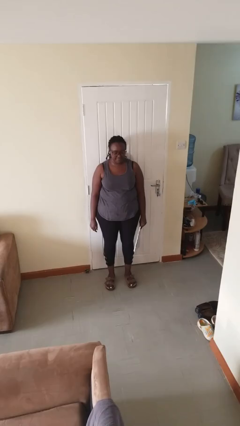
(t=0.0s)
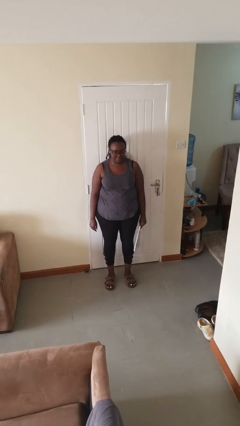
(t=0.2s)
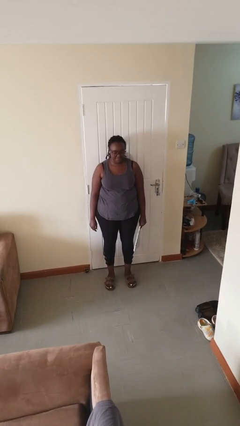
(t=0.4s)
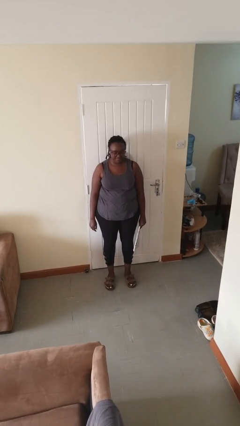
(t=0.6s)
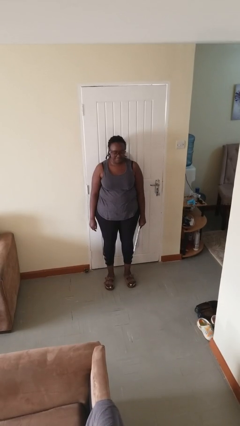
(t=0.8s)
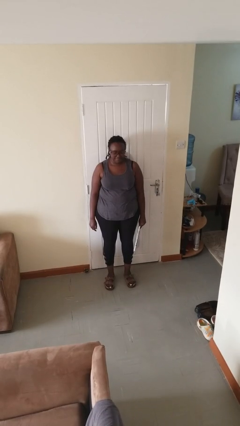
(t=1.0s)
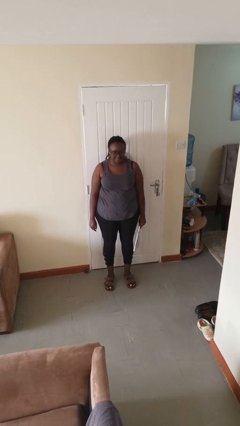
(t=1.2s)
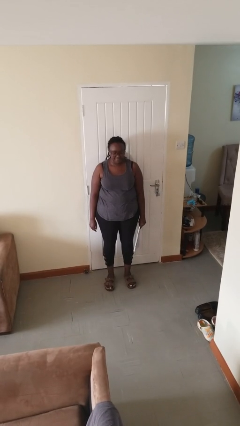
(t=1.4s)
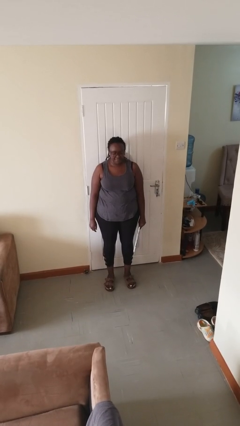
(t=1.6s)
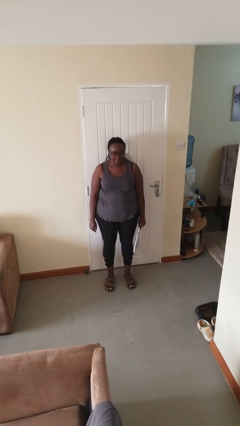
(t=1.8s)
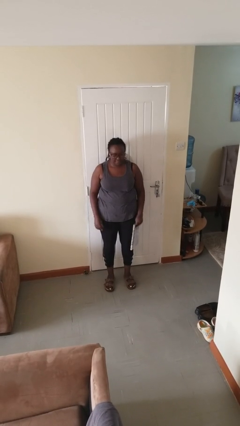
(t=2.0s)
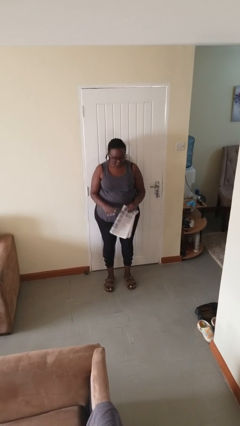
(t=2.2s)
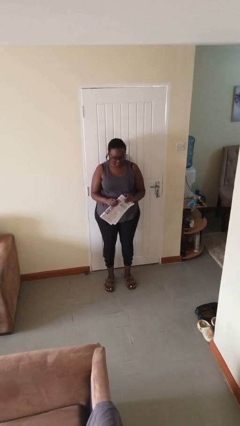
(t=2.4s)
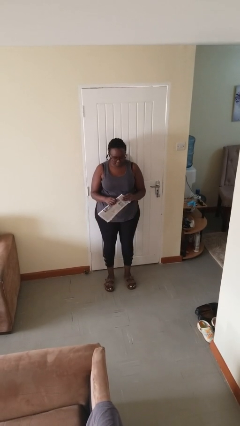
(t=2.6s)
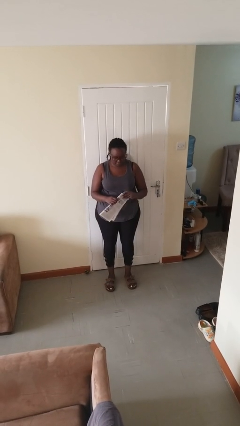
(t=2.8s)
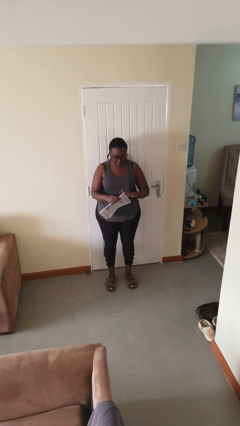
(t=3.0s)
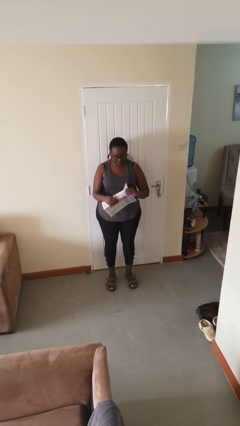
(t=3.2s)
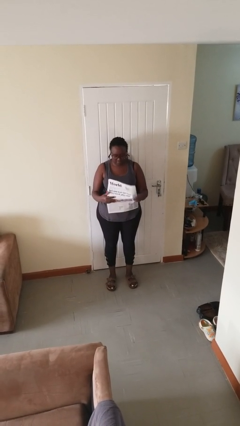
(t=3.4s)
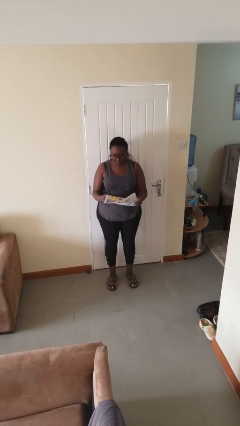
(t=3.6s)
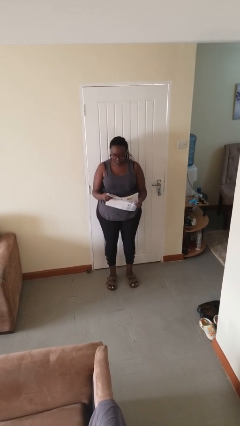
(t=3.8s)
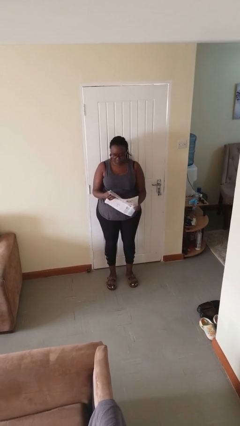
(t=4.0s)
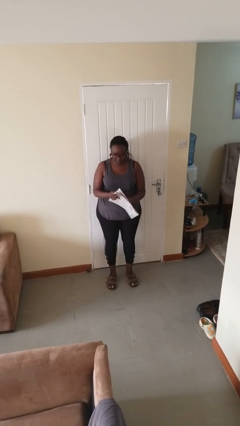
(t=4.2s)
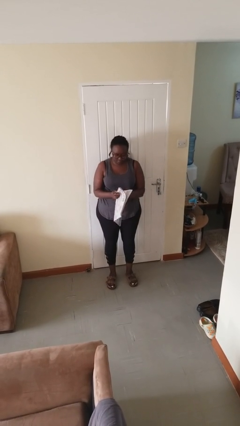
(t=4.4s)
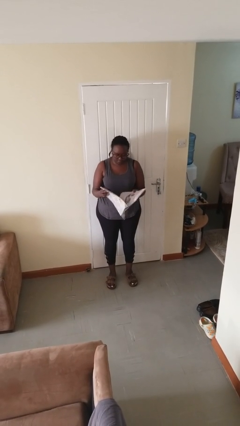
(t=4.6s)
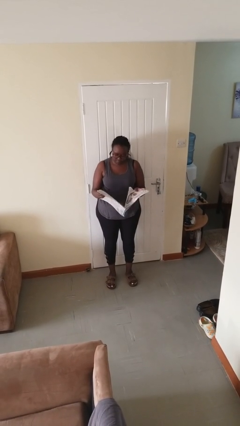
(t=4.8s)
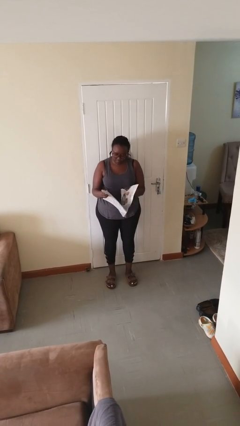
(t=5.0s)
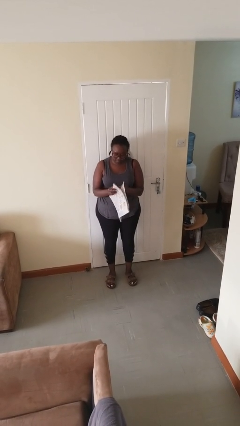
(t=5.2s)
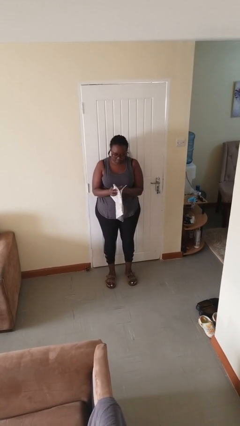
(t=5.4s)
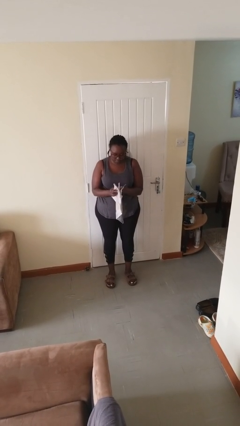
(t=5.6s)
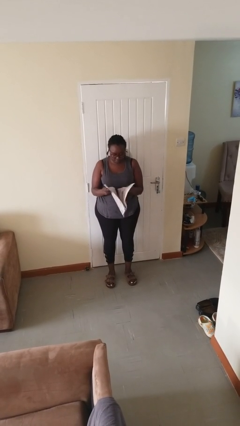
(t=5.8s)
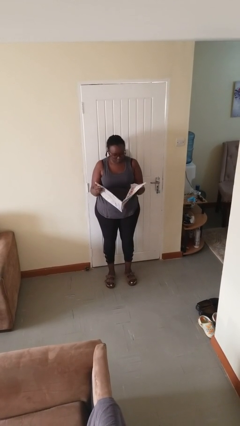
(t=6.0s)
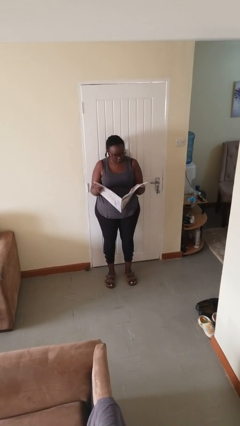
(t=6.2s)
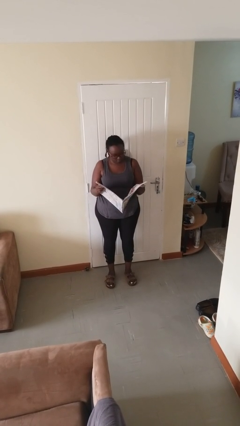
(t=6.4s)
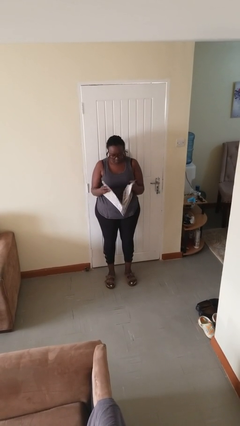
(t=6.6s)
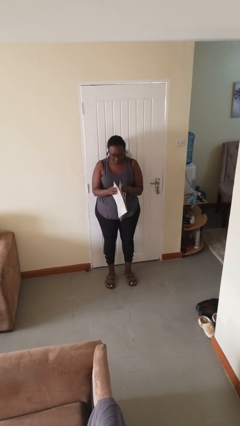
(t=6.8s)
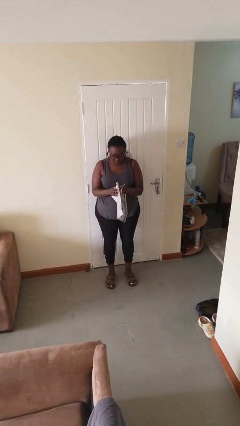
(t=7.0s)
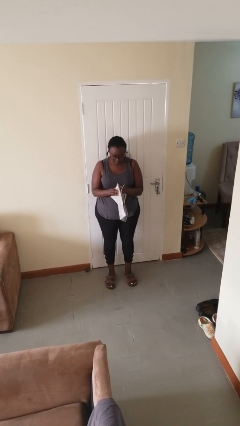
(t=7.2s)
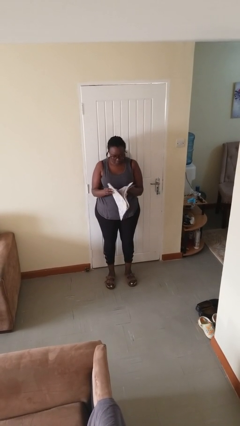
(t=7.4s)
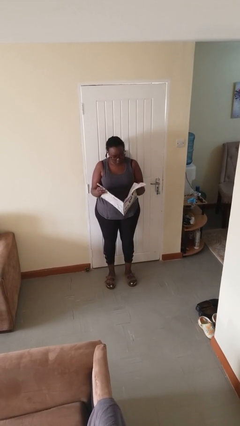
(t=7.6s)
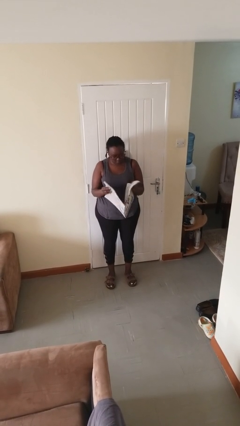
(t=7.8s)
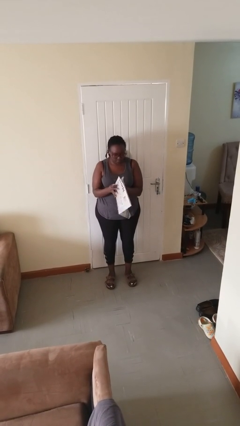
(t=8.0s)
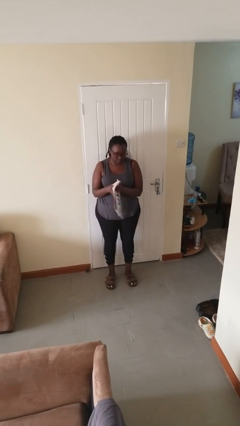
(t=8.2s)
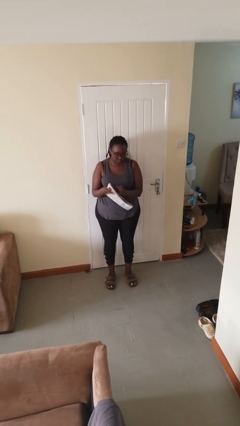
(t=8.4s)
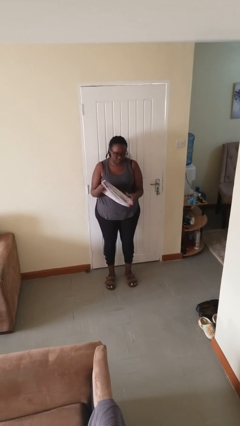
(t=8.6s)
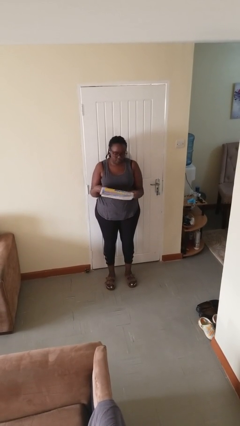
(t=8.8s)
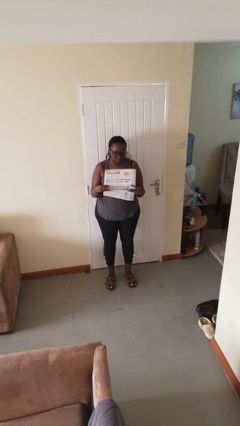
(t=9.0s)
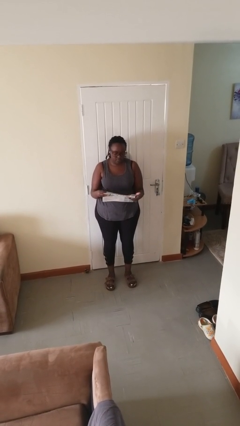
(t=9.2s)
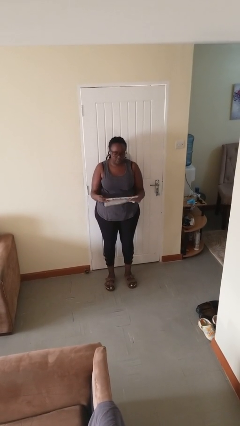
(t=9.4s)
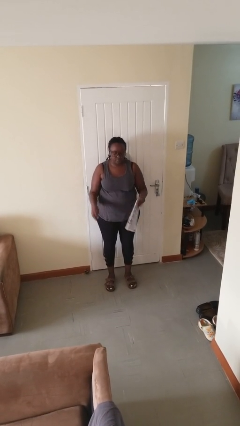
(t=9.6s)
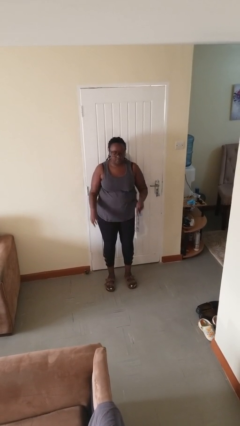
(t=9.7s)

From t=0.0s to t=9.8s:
person reads newspaper

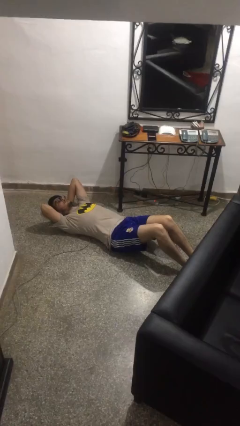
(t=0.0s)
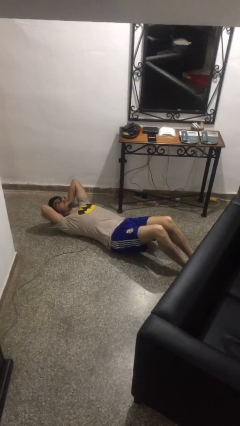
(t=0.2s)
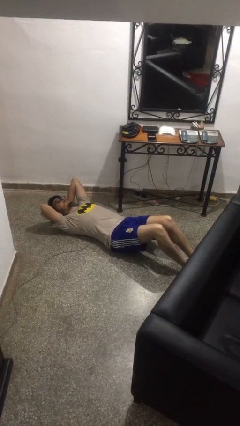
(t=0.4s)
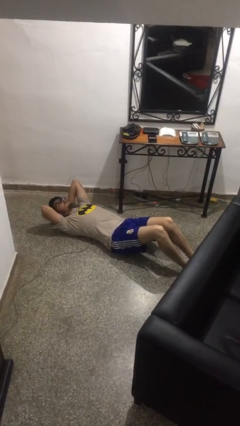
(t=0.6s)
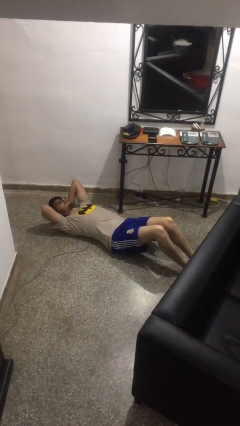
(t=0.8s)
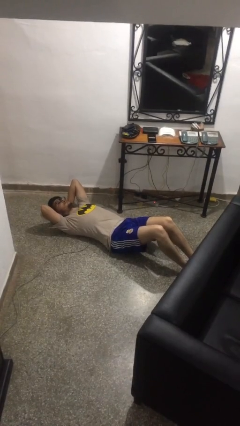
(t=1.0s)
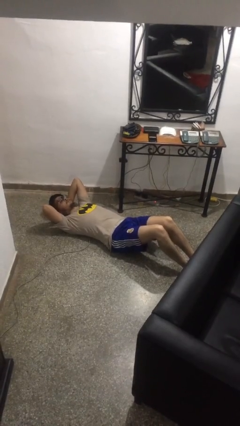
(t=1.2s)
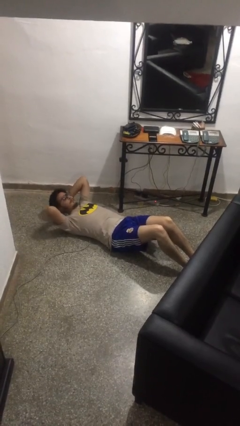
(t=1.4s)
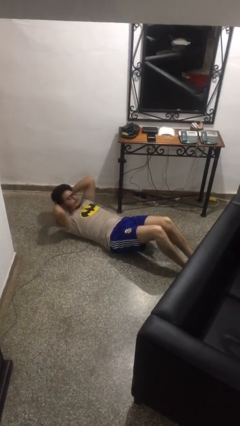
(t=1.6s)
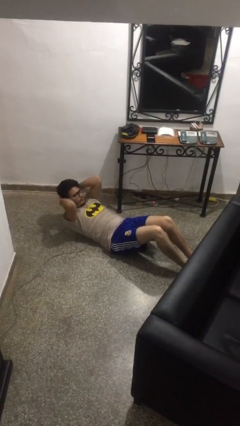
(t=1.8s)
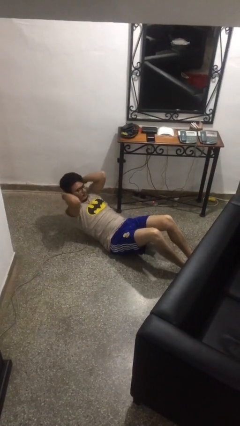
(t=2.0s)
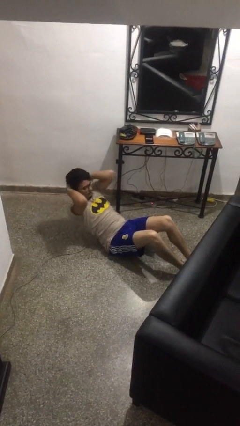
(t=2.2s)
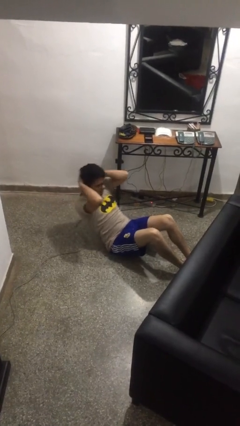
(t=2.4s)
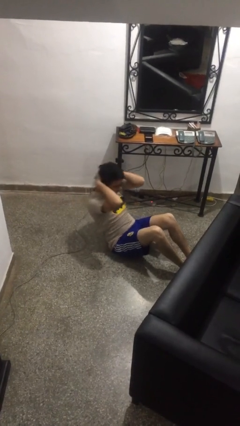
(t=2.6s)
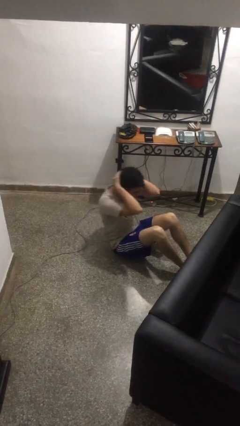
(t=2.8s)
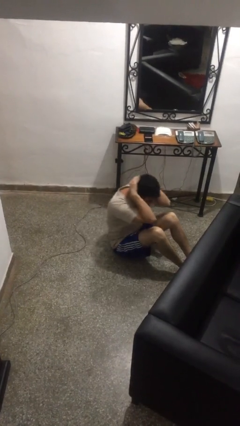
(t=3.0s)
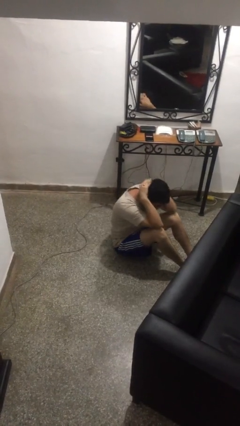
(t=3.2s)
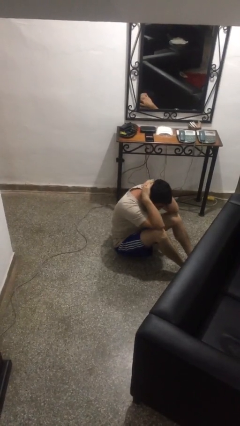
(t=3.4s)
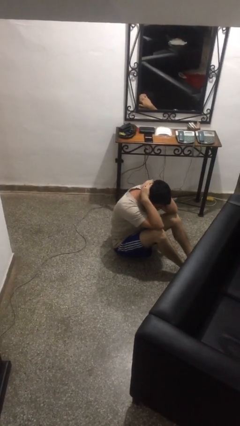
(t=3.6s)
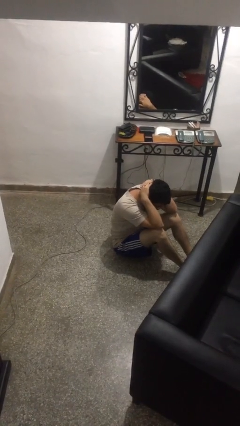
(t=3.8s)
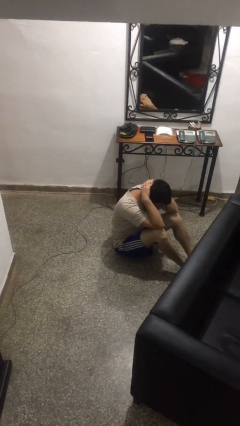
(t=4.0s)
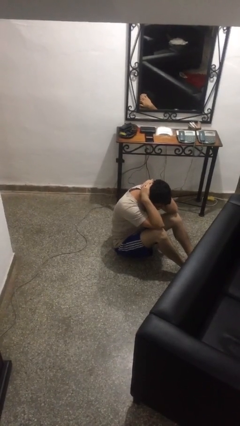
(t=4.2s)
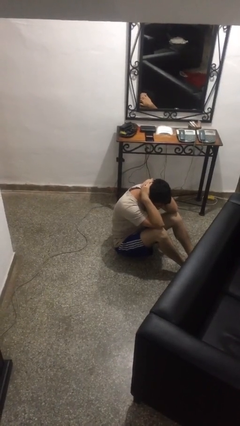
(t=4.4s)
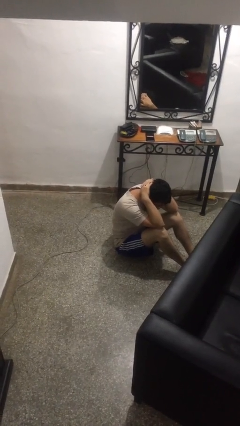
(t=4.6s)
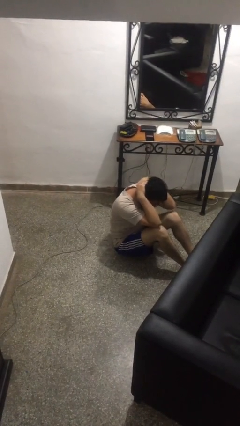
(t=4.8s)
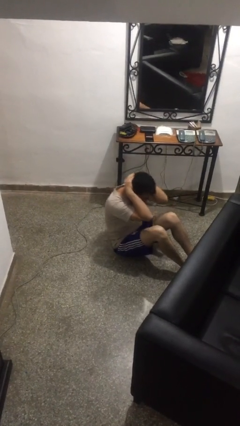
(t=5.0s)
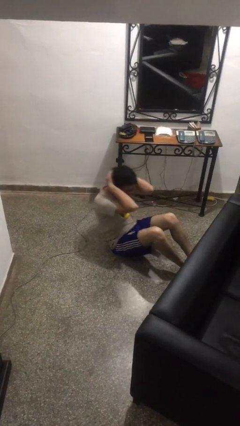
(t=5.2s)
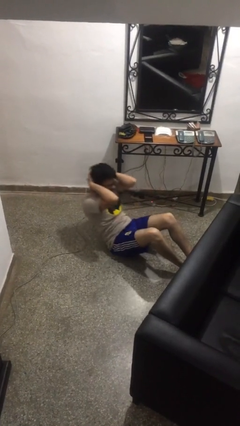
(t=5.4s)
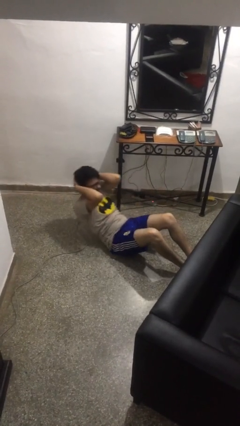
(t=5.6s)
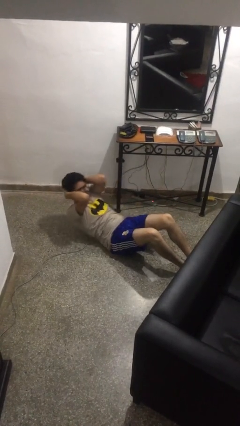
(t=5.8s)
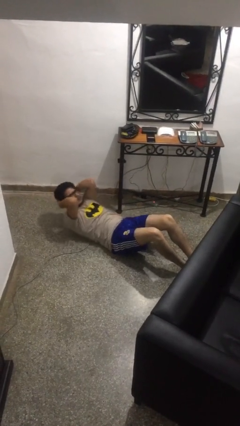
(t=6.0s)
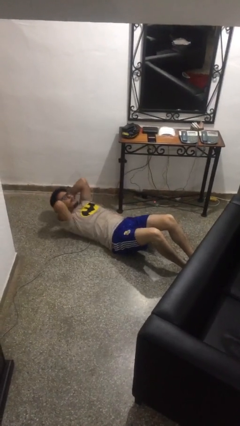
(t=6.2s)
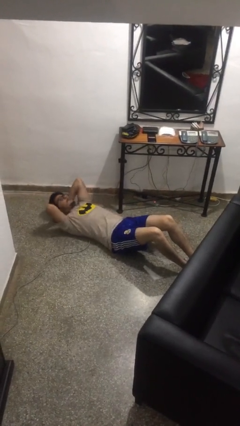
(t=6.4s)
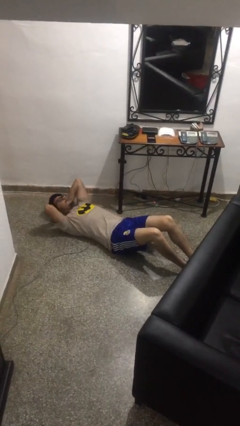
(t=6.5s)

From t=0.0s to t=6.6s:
person exercises with situp

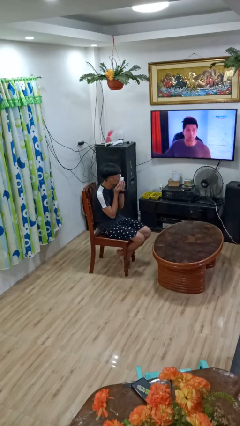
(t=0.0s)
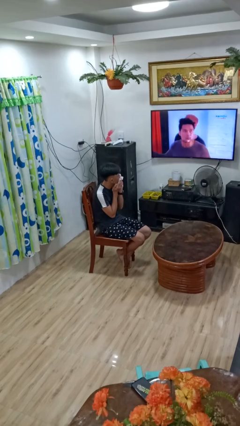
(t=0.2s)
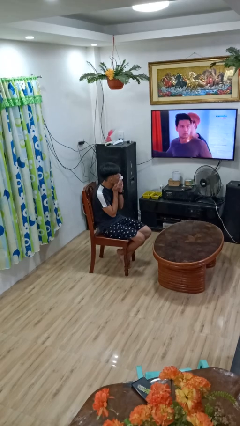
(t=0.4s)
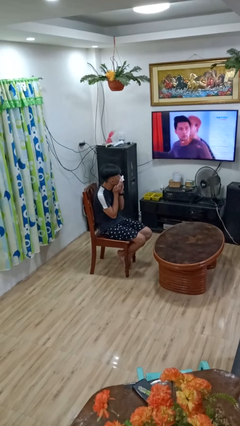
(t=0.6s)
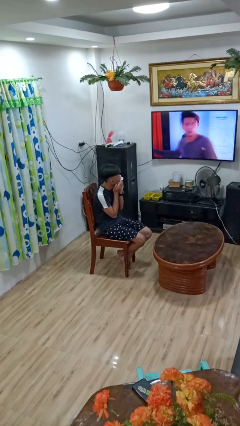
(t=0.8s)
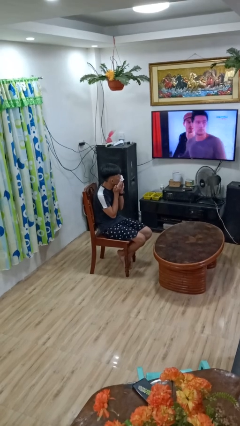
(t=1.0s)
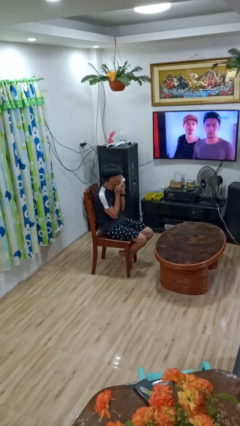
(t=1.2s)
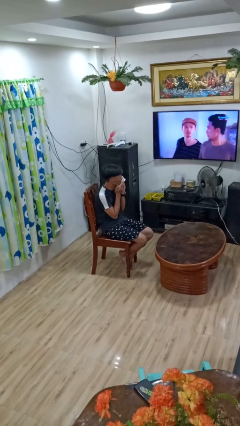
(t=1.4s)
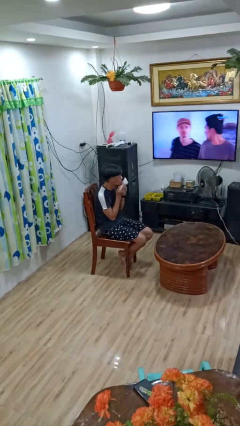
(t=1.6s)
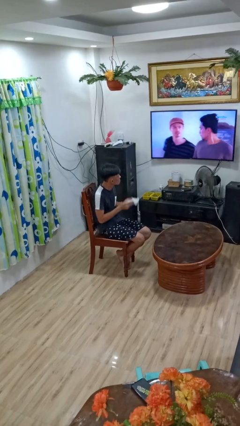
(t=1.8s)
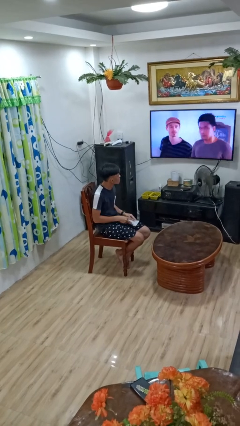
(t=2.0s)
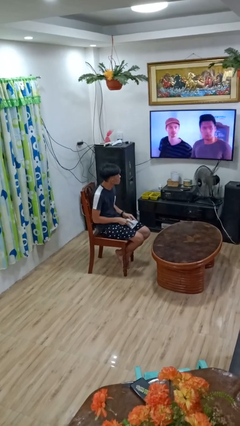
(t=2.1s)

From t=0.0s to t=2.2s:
person wipes mouth with napkin
